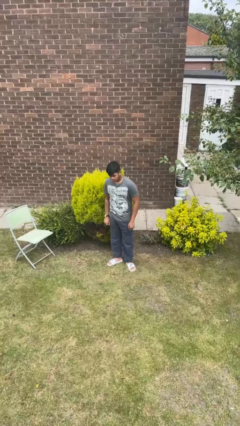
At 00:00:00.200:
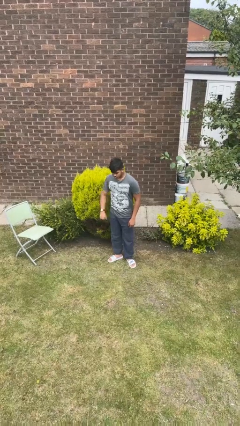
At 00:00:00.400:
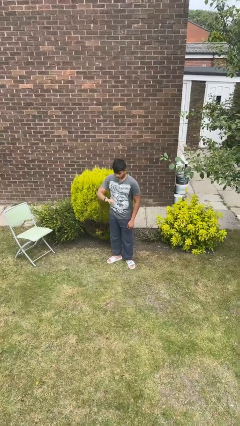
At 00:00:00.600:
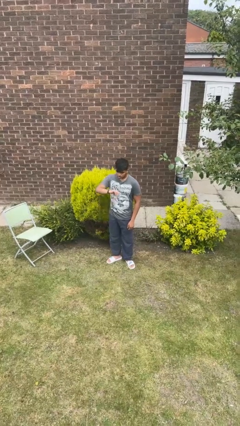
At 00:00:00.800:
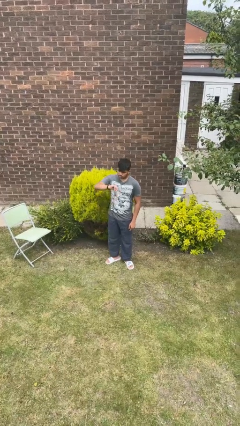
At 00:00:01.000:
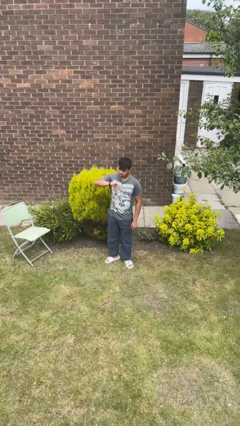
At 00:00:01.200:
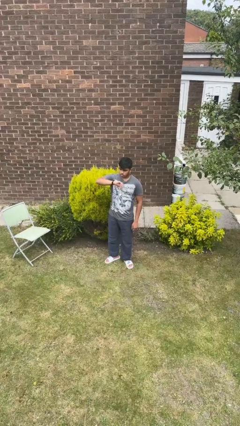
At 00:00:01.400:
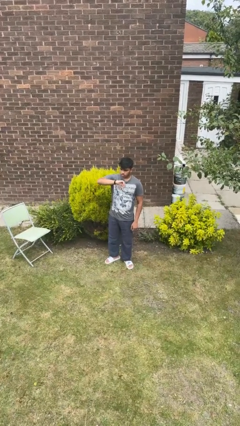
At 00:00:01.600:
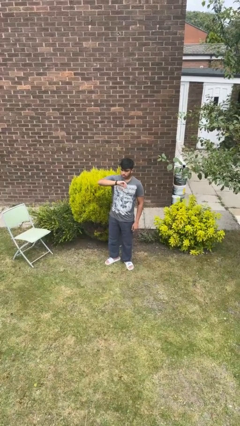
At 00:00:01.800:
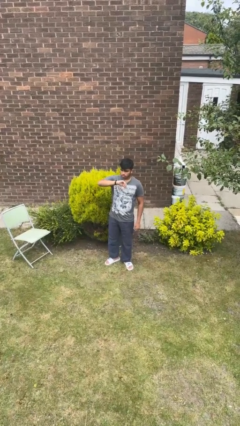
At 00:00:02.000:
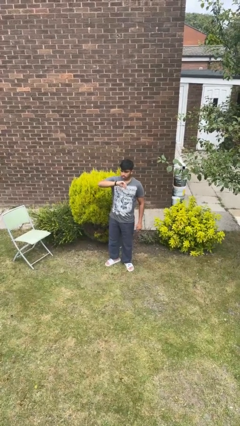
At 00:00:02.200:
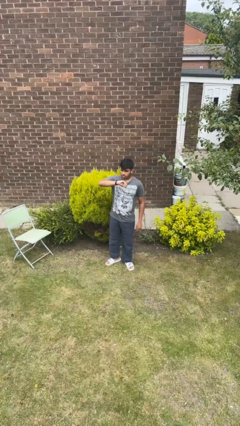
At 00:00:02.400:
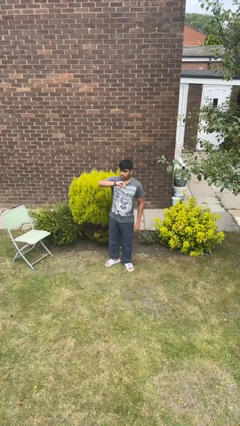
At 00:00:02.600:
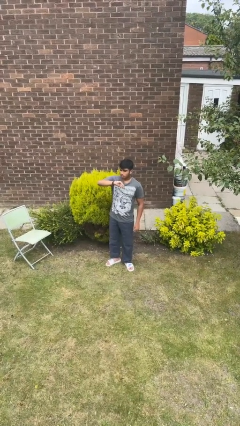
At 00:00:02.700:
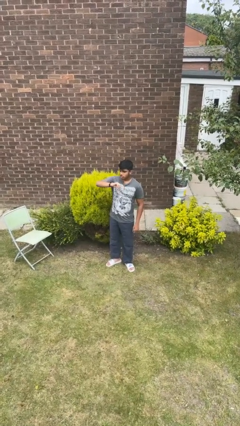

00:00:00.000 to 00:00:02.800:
person looks at wristwatch

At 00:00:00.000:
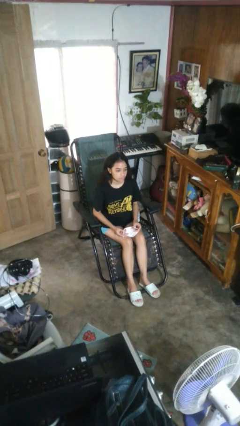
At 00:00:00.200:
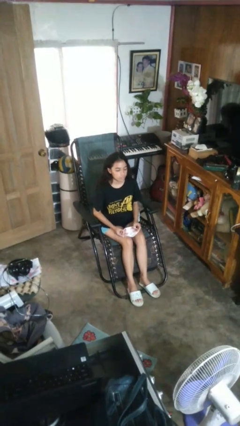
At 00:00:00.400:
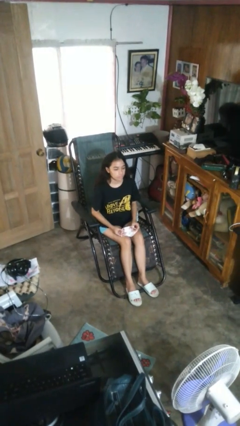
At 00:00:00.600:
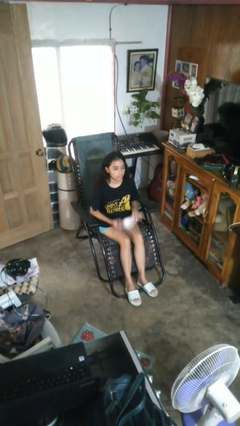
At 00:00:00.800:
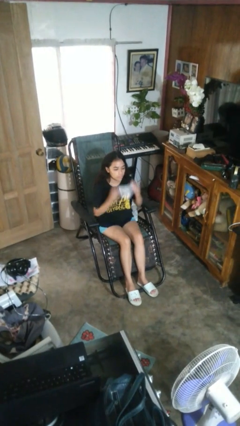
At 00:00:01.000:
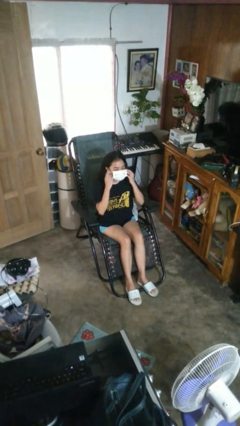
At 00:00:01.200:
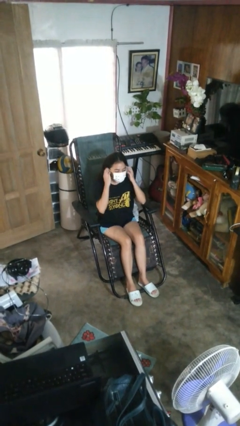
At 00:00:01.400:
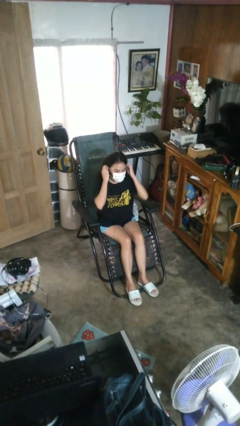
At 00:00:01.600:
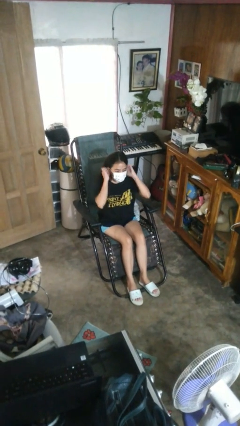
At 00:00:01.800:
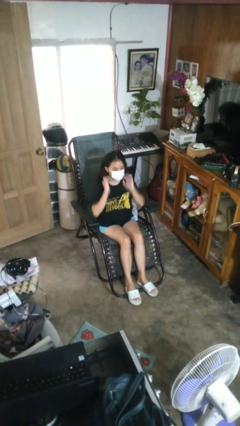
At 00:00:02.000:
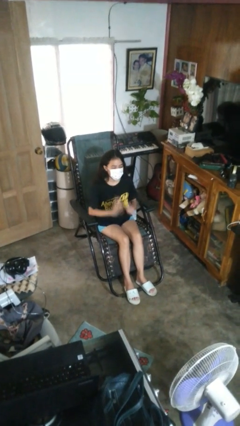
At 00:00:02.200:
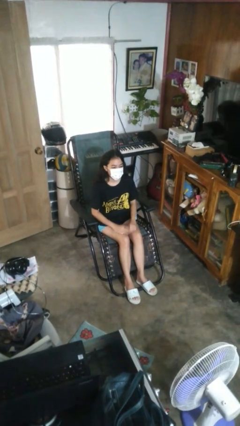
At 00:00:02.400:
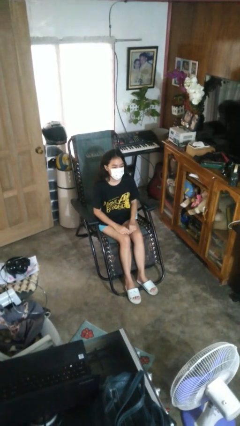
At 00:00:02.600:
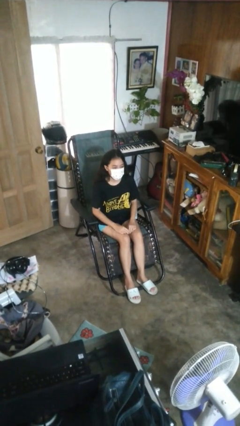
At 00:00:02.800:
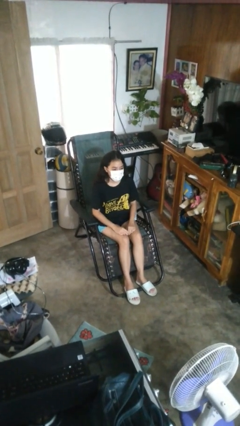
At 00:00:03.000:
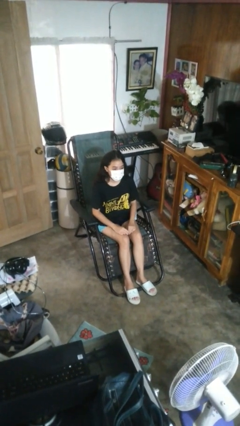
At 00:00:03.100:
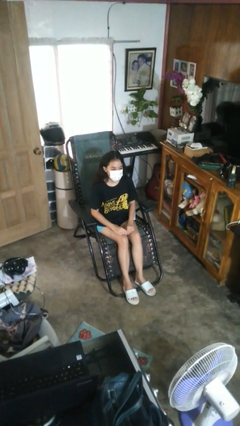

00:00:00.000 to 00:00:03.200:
person puts on facemask

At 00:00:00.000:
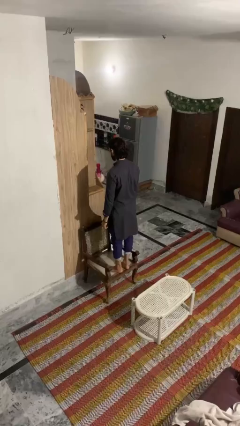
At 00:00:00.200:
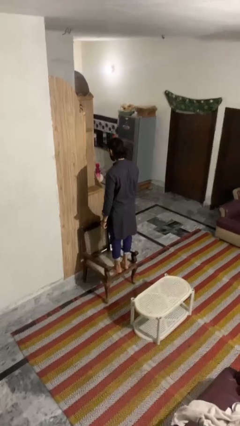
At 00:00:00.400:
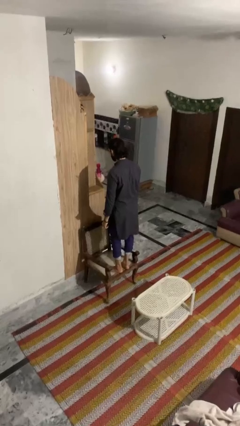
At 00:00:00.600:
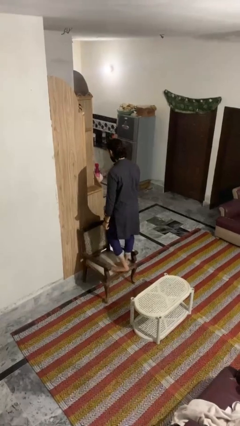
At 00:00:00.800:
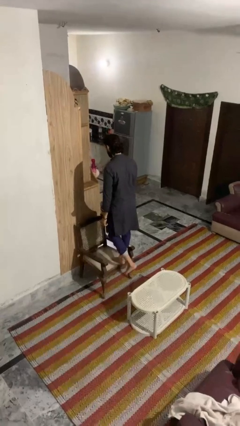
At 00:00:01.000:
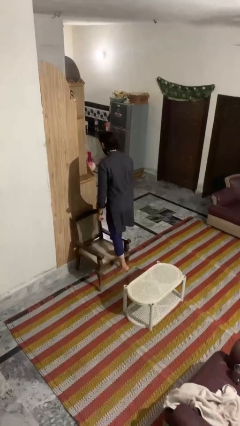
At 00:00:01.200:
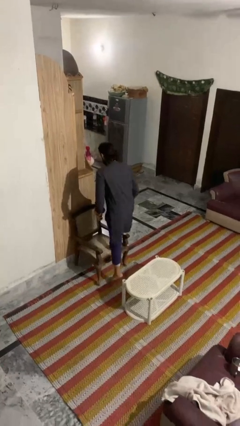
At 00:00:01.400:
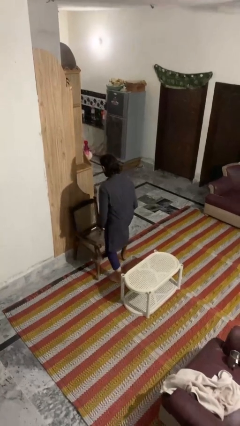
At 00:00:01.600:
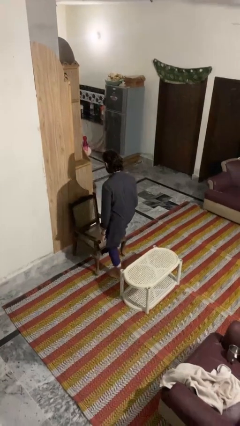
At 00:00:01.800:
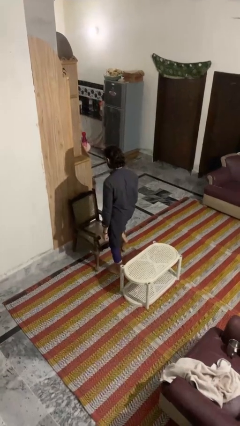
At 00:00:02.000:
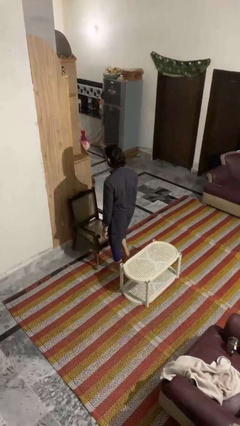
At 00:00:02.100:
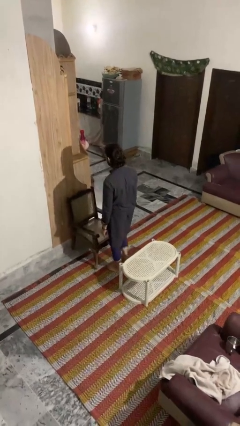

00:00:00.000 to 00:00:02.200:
person climbs off chair

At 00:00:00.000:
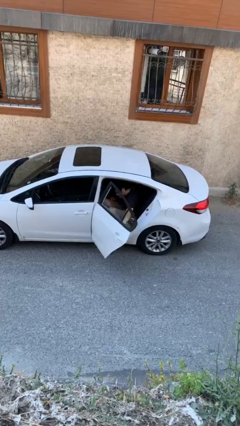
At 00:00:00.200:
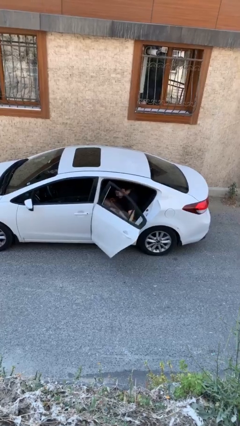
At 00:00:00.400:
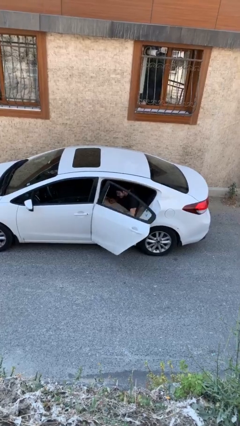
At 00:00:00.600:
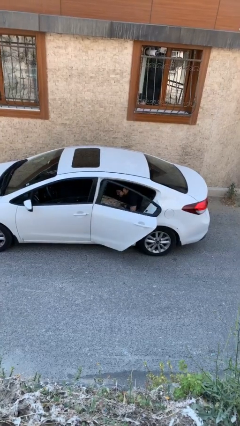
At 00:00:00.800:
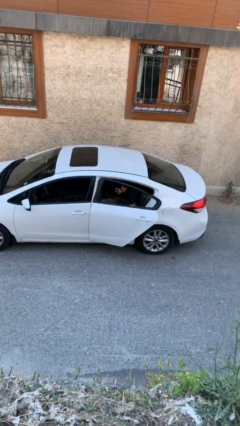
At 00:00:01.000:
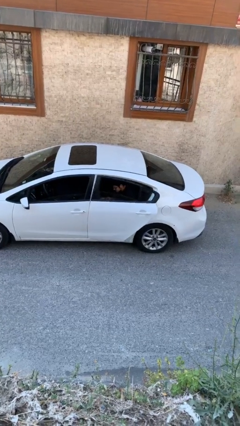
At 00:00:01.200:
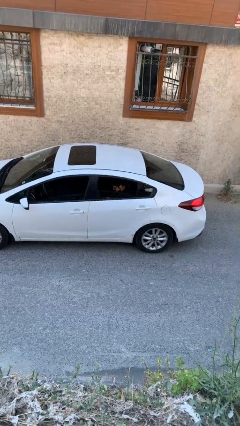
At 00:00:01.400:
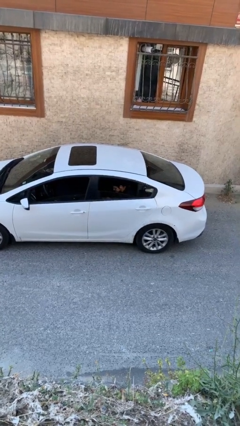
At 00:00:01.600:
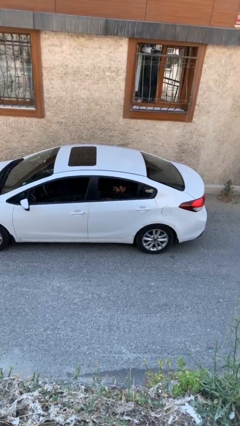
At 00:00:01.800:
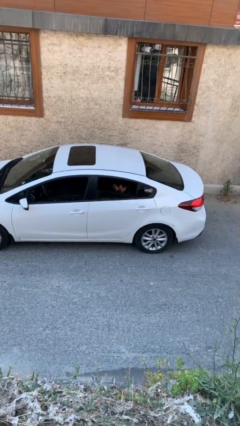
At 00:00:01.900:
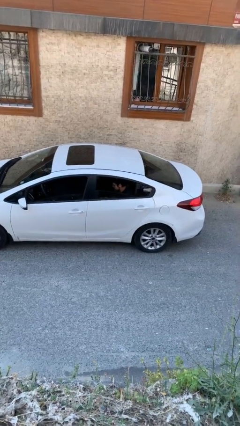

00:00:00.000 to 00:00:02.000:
person closes car door

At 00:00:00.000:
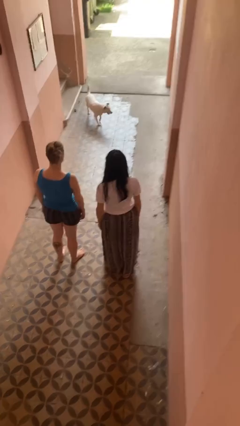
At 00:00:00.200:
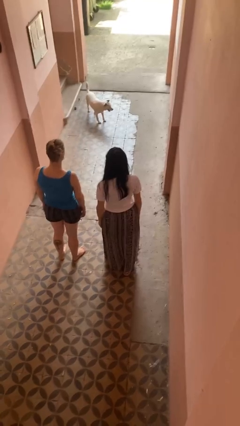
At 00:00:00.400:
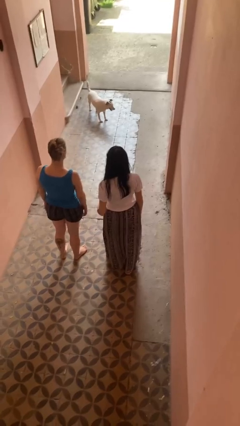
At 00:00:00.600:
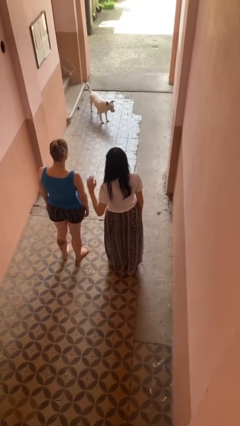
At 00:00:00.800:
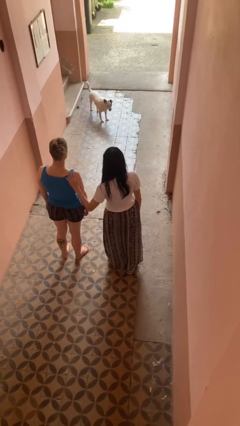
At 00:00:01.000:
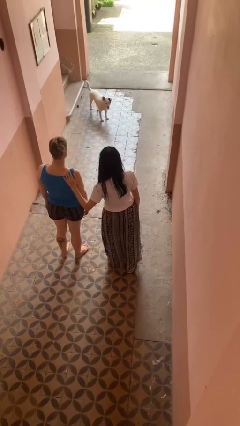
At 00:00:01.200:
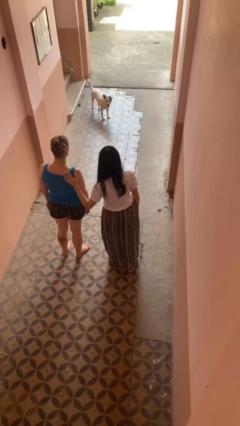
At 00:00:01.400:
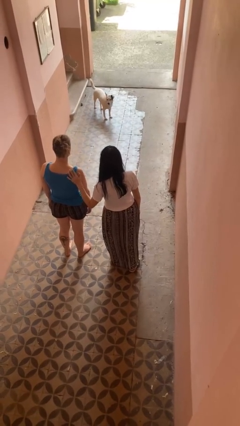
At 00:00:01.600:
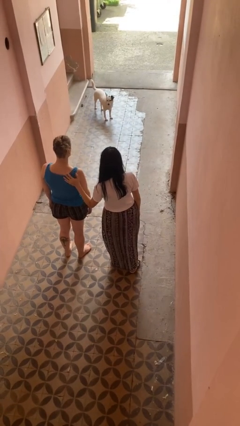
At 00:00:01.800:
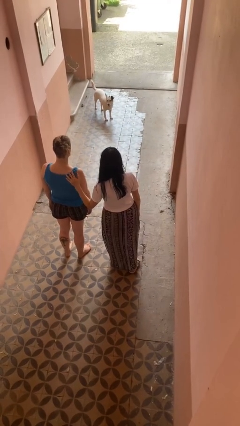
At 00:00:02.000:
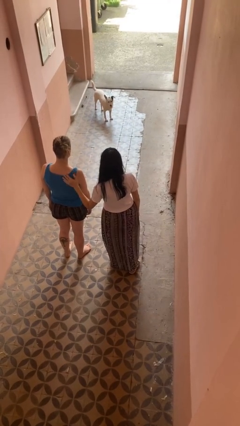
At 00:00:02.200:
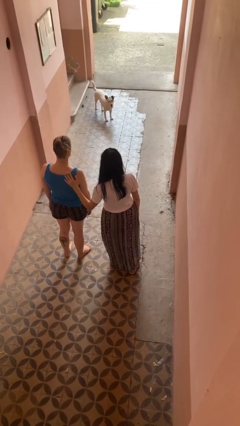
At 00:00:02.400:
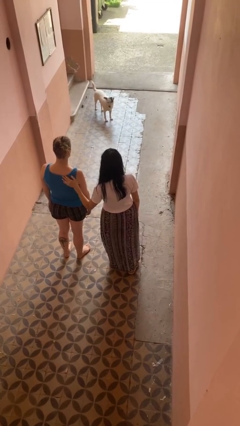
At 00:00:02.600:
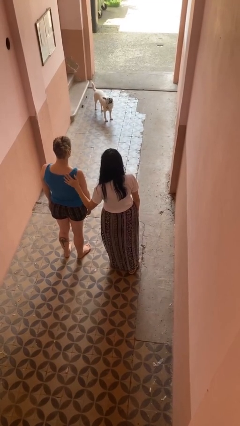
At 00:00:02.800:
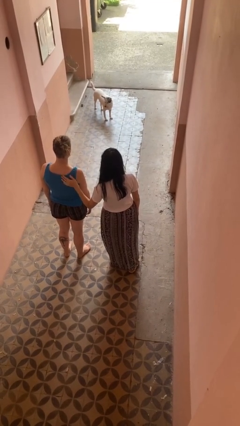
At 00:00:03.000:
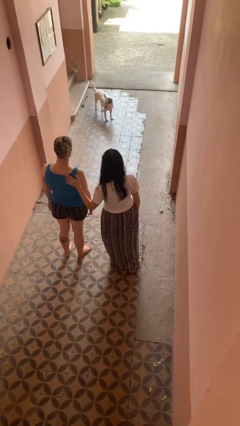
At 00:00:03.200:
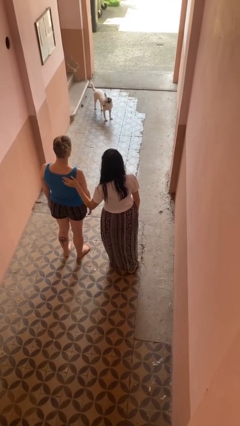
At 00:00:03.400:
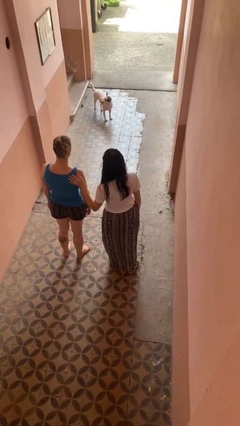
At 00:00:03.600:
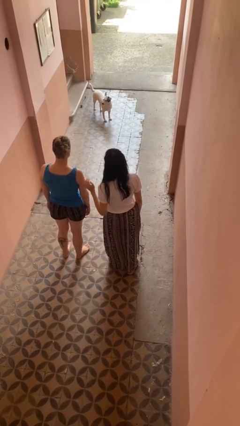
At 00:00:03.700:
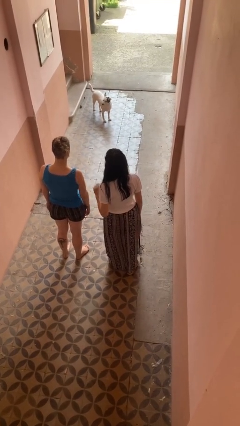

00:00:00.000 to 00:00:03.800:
person touches back of person

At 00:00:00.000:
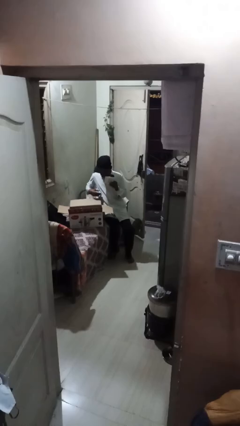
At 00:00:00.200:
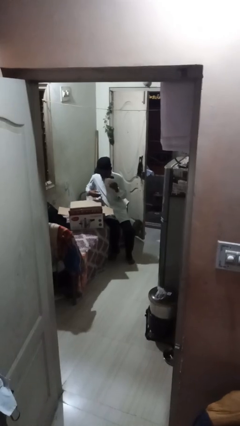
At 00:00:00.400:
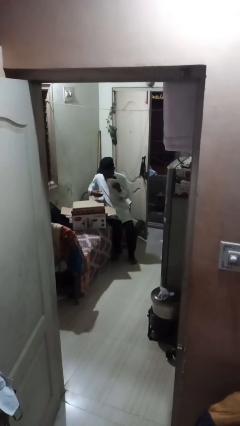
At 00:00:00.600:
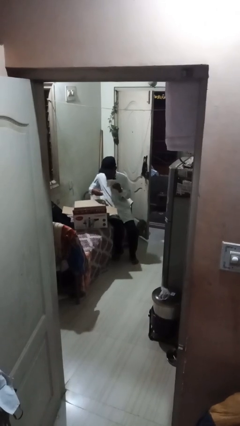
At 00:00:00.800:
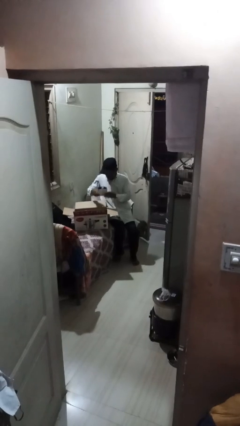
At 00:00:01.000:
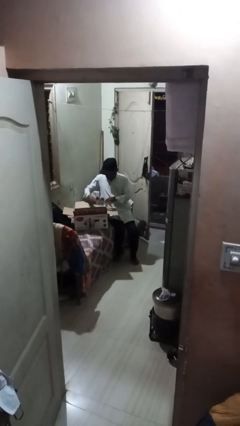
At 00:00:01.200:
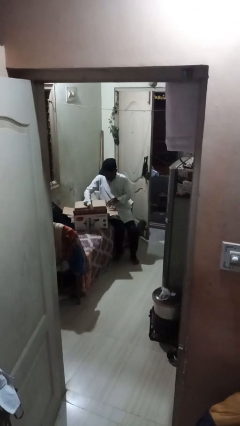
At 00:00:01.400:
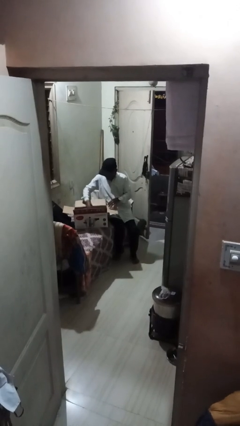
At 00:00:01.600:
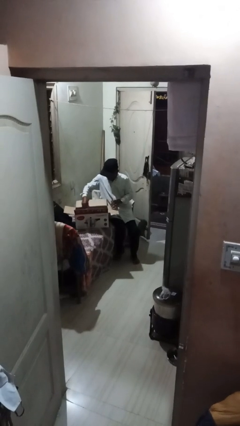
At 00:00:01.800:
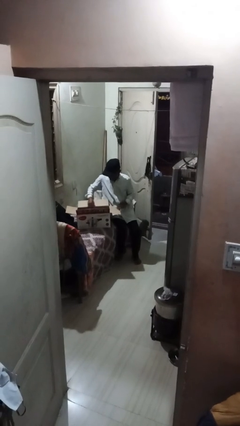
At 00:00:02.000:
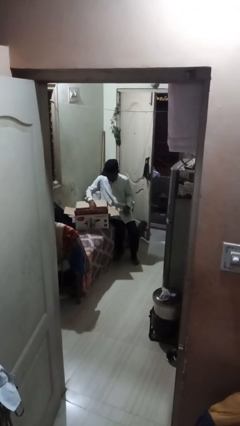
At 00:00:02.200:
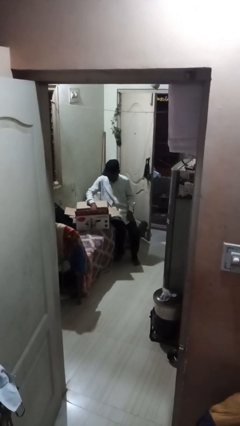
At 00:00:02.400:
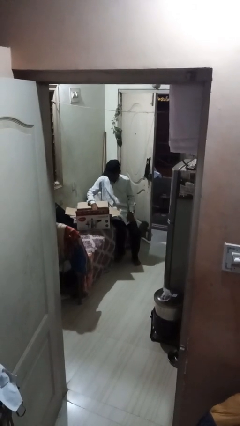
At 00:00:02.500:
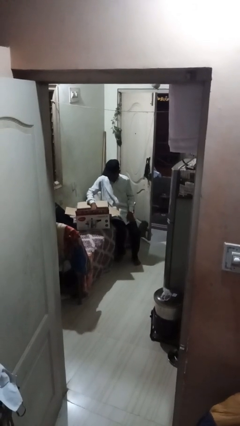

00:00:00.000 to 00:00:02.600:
person puts object into box

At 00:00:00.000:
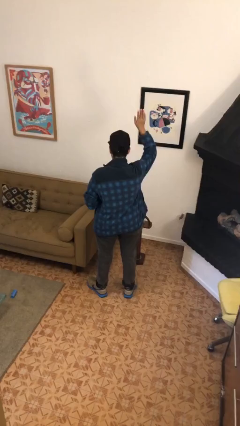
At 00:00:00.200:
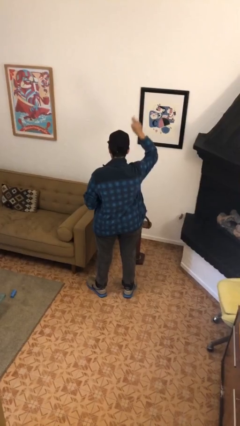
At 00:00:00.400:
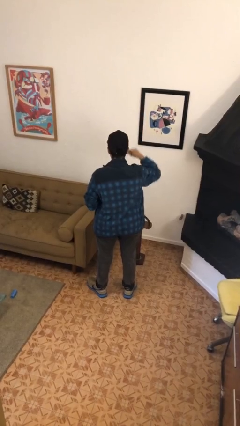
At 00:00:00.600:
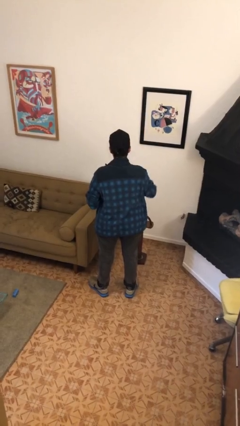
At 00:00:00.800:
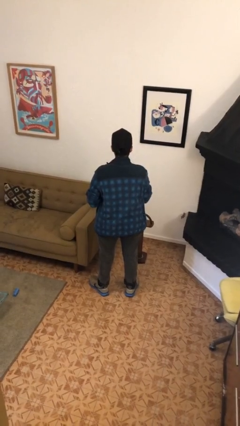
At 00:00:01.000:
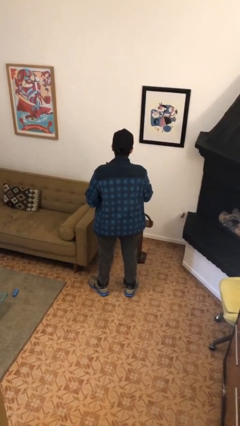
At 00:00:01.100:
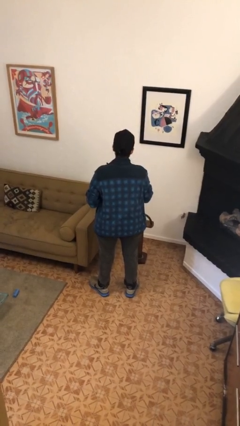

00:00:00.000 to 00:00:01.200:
person gestures lower hand
